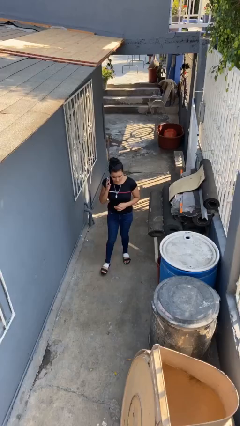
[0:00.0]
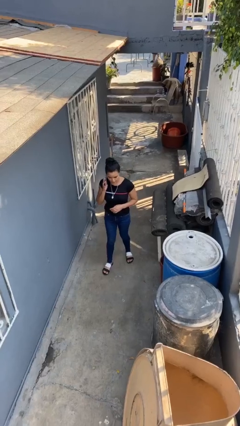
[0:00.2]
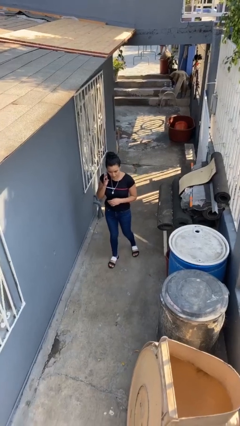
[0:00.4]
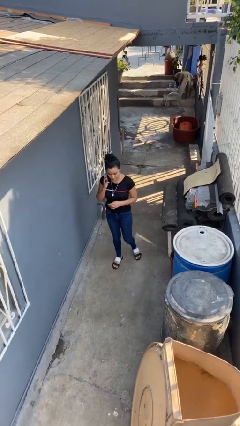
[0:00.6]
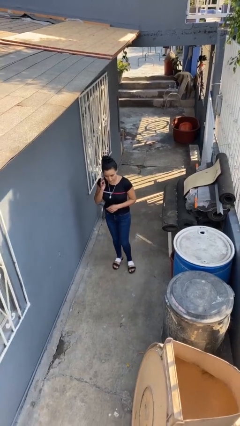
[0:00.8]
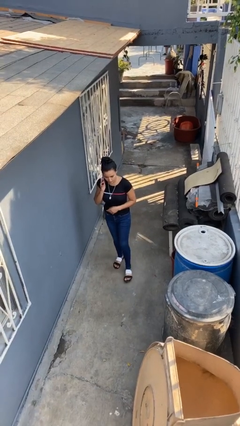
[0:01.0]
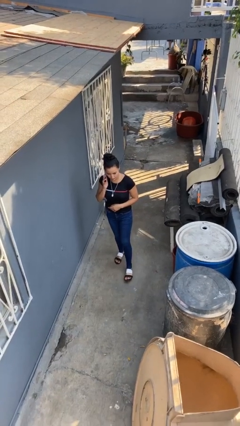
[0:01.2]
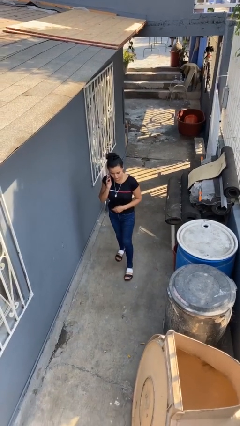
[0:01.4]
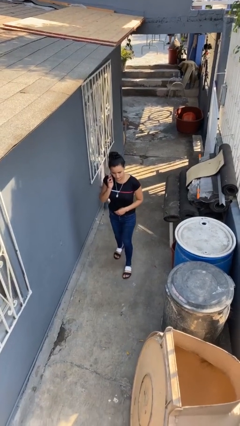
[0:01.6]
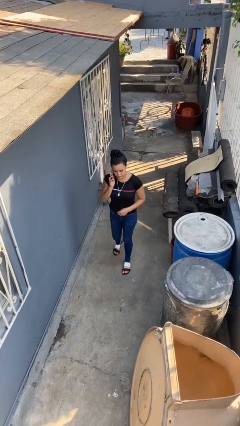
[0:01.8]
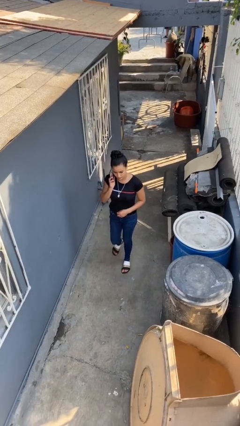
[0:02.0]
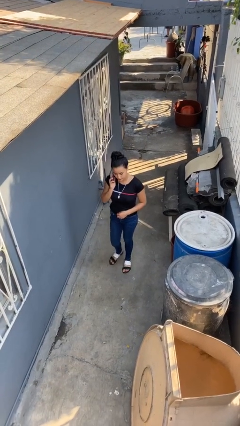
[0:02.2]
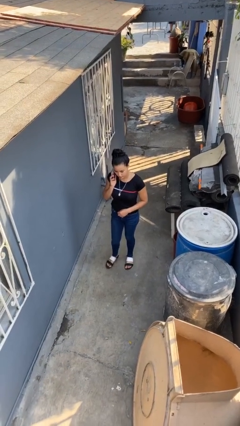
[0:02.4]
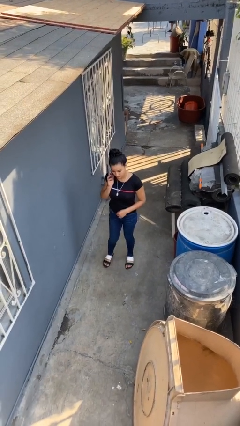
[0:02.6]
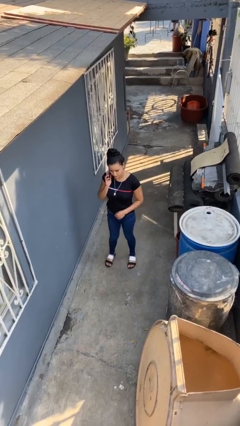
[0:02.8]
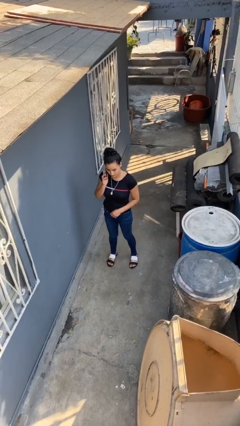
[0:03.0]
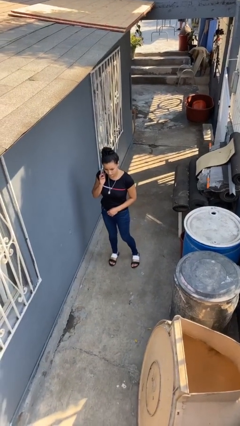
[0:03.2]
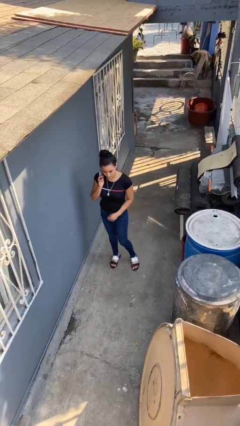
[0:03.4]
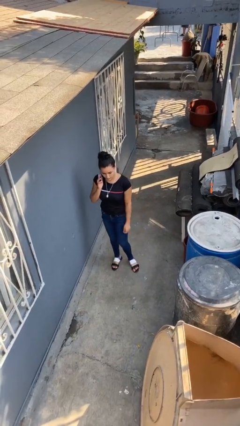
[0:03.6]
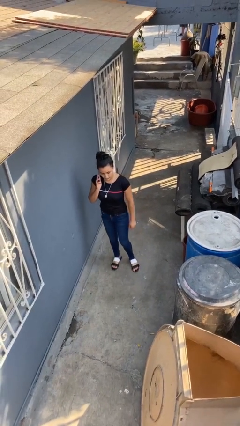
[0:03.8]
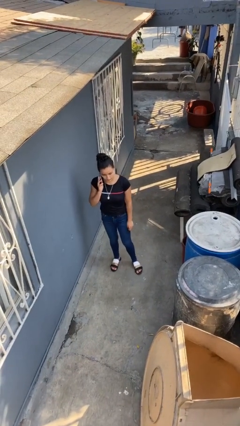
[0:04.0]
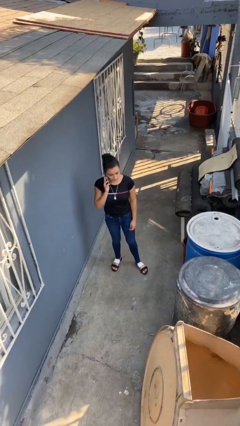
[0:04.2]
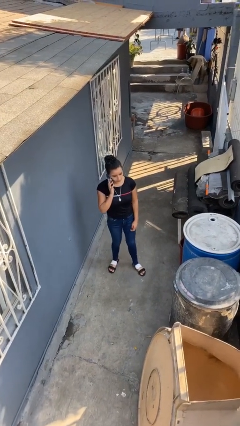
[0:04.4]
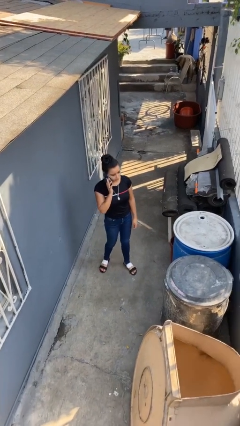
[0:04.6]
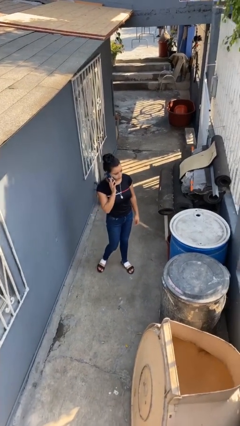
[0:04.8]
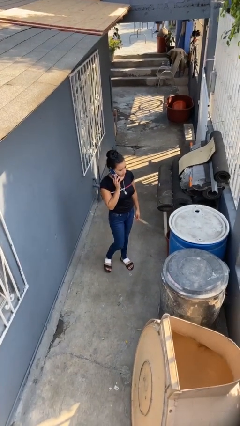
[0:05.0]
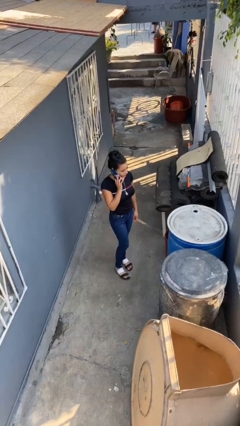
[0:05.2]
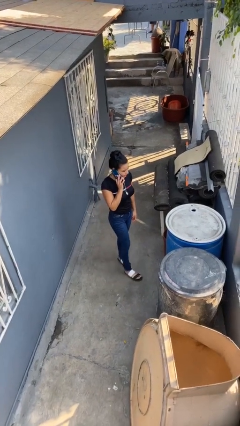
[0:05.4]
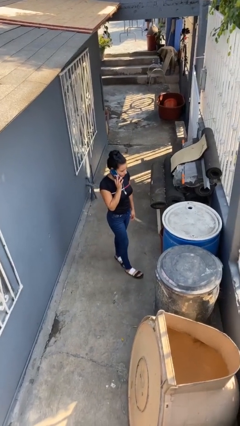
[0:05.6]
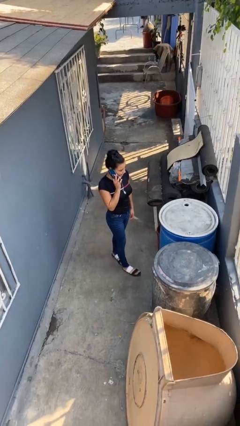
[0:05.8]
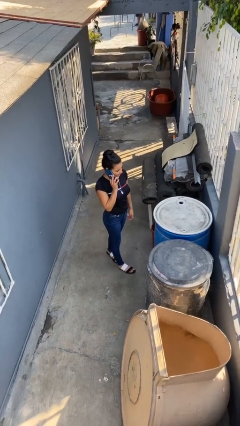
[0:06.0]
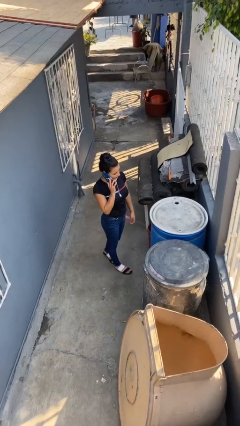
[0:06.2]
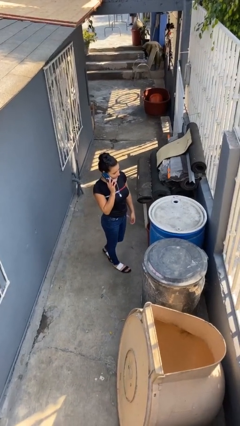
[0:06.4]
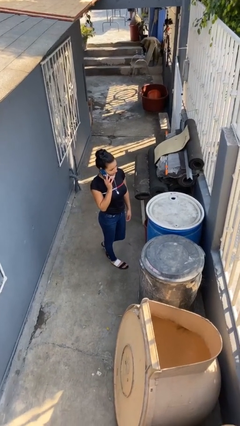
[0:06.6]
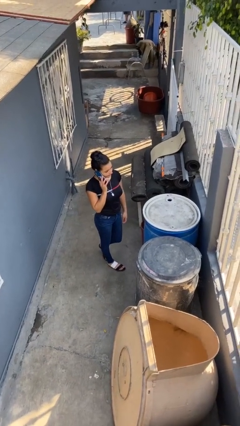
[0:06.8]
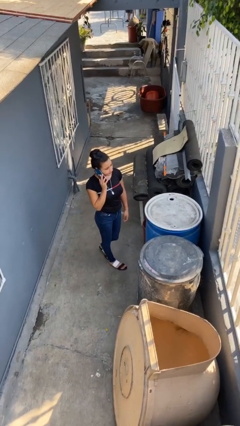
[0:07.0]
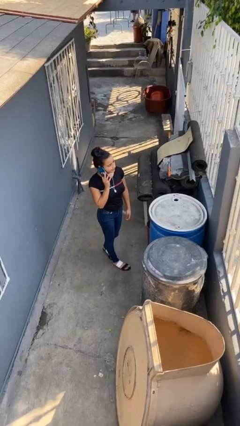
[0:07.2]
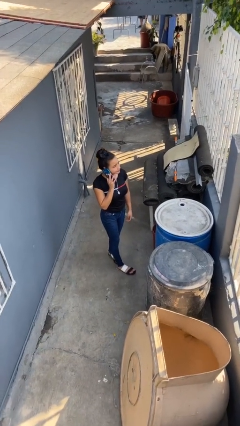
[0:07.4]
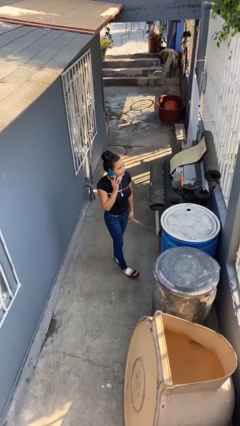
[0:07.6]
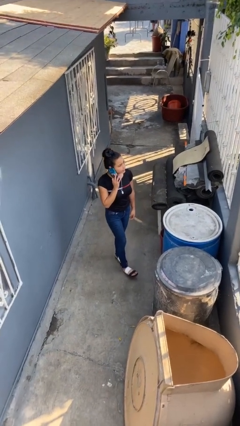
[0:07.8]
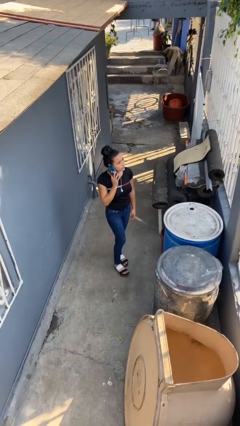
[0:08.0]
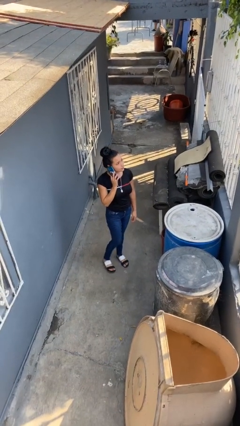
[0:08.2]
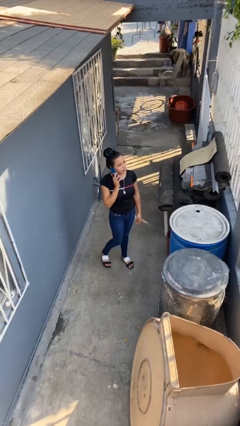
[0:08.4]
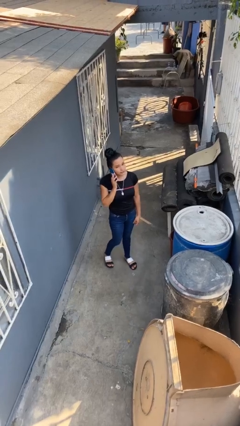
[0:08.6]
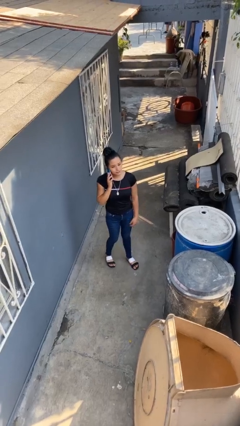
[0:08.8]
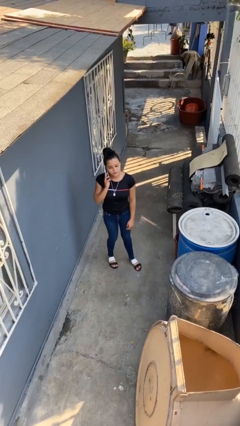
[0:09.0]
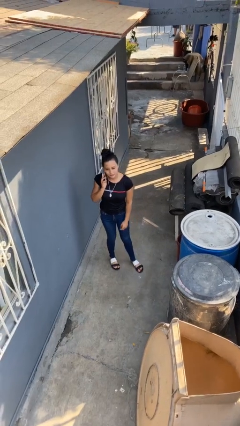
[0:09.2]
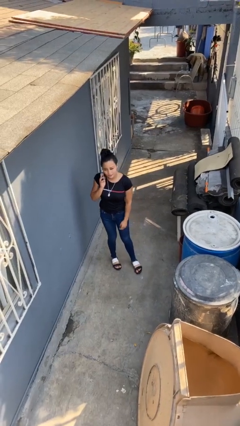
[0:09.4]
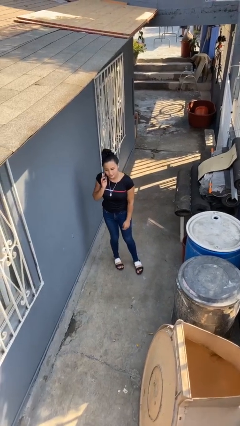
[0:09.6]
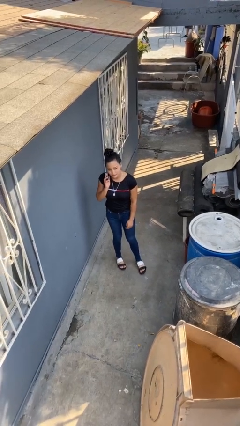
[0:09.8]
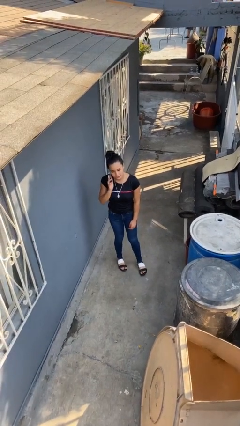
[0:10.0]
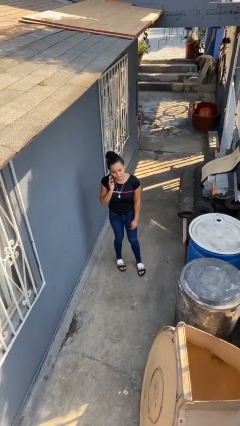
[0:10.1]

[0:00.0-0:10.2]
person talks on phone

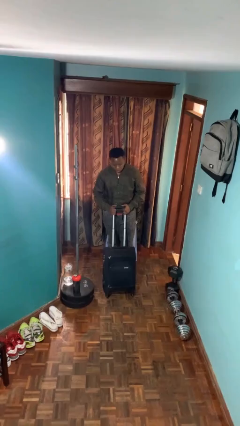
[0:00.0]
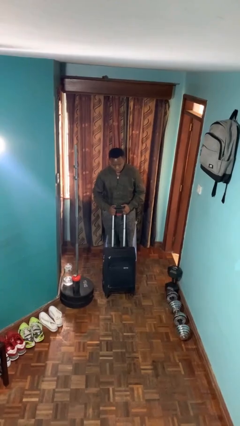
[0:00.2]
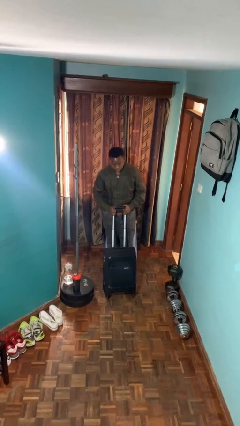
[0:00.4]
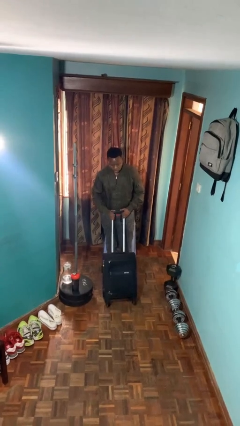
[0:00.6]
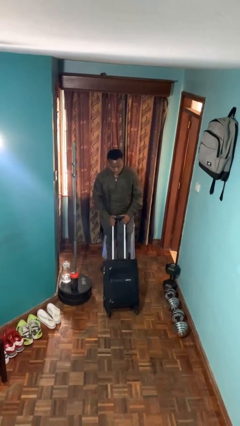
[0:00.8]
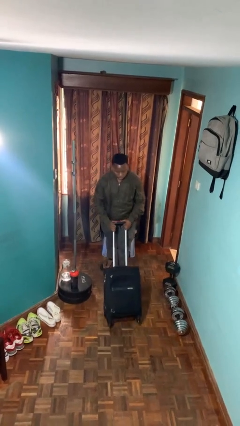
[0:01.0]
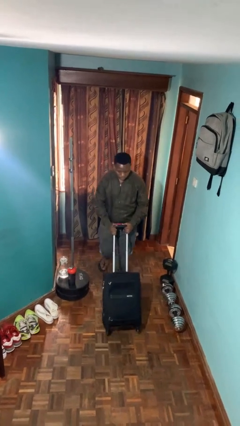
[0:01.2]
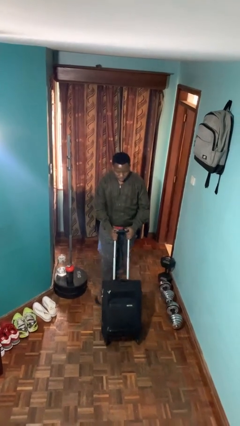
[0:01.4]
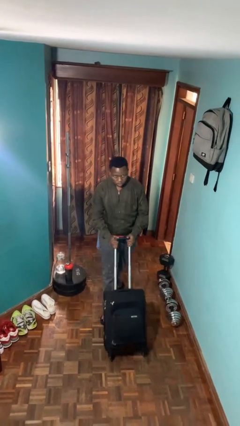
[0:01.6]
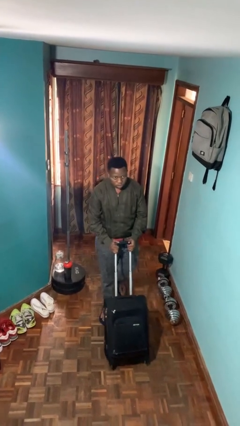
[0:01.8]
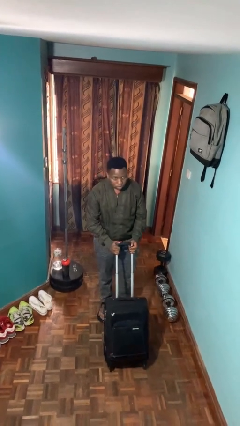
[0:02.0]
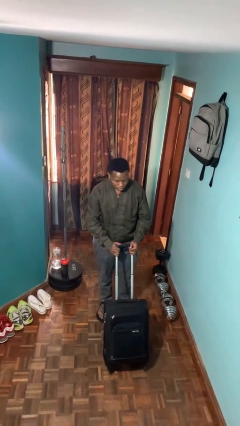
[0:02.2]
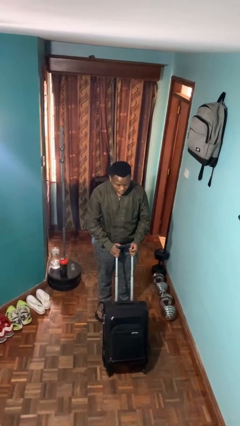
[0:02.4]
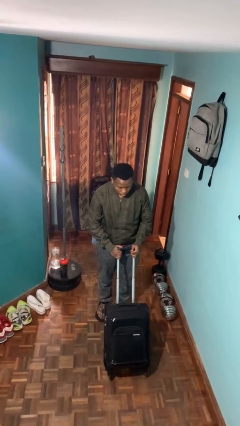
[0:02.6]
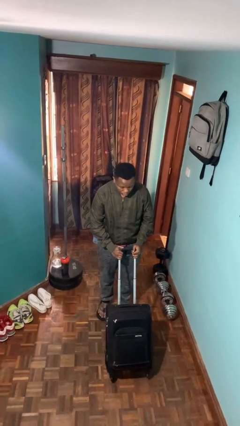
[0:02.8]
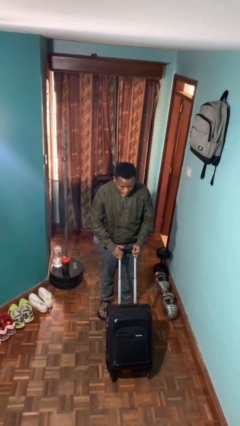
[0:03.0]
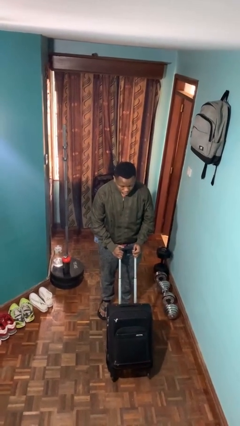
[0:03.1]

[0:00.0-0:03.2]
person pushes wheeled cart

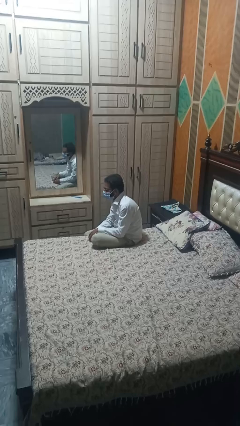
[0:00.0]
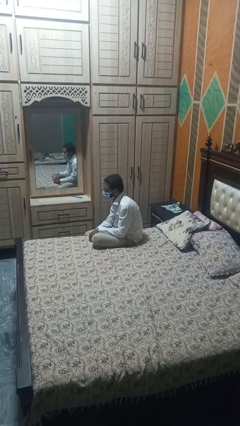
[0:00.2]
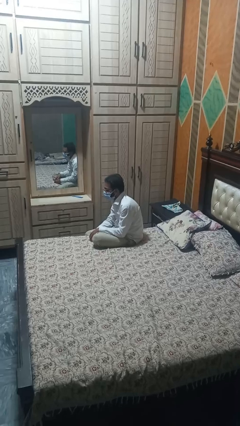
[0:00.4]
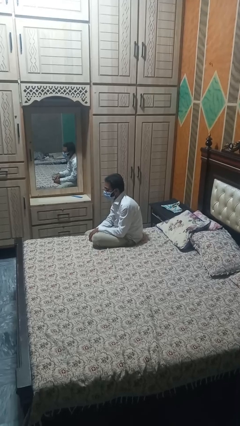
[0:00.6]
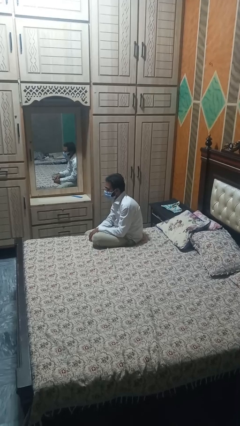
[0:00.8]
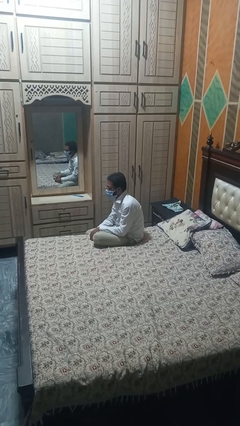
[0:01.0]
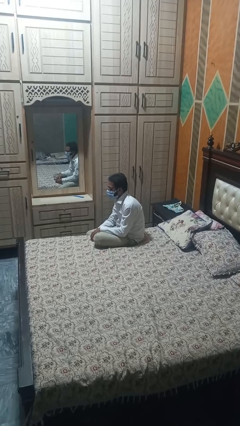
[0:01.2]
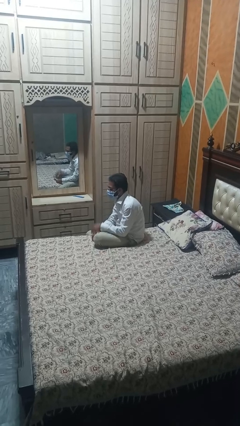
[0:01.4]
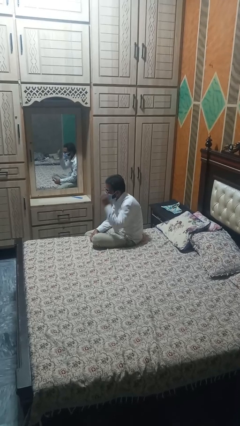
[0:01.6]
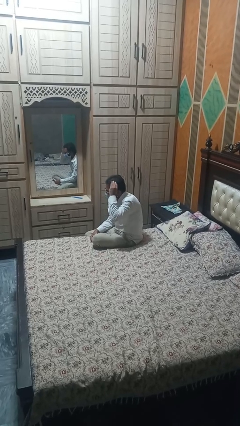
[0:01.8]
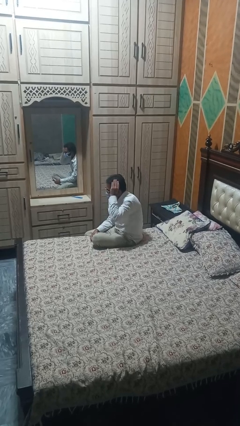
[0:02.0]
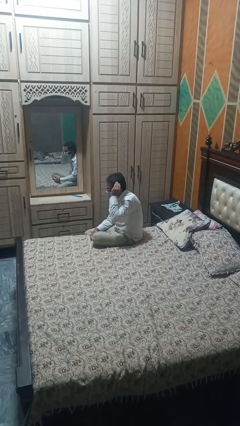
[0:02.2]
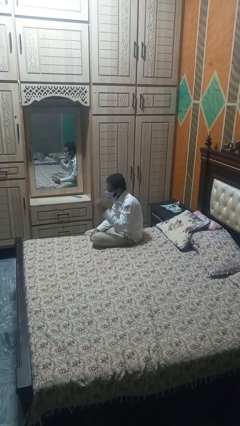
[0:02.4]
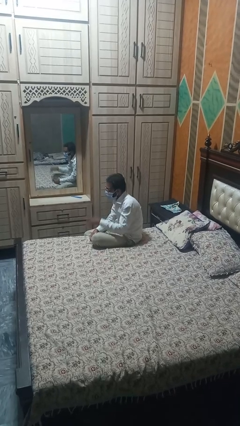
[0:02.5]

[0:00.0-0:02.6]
person strokes hair

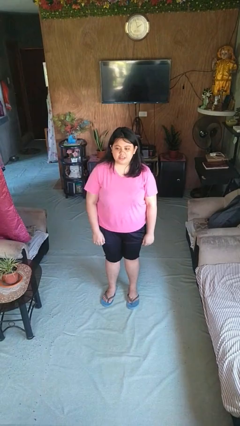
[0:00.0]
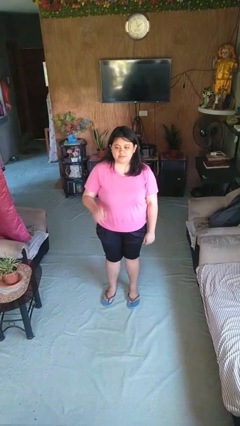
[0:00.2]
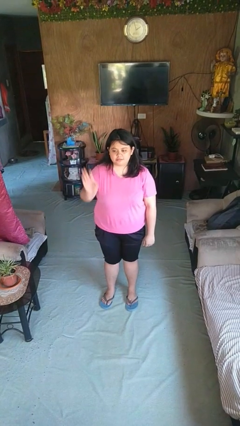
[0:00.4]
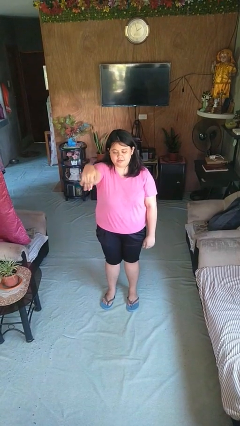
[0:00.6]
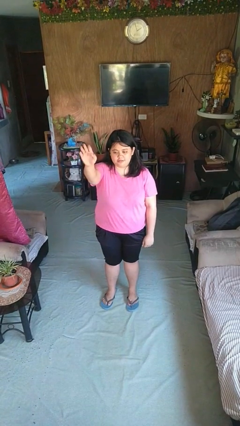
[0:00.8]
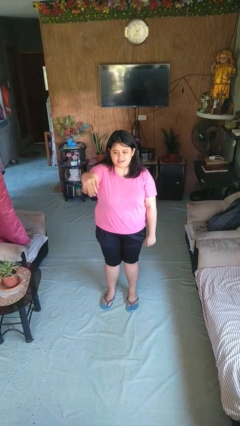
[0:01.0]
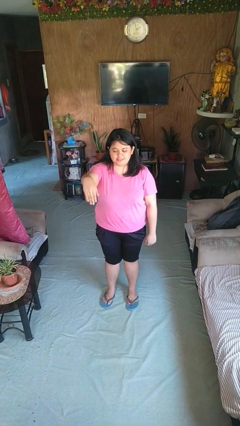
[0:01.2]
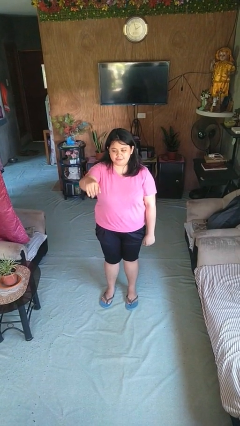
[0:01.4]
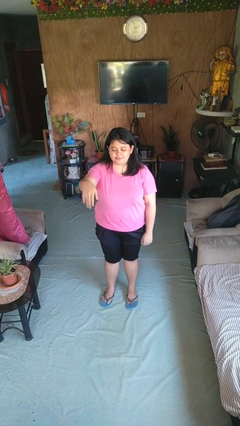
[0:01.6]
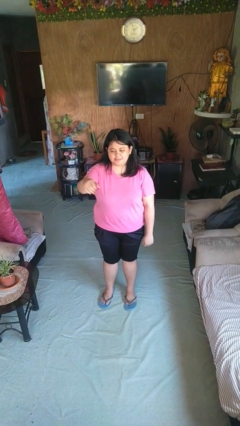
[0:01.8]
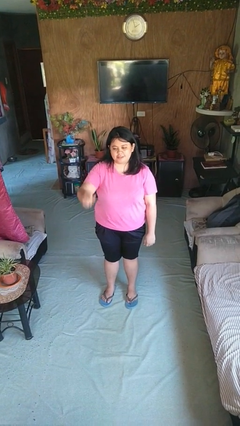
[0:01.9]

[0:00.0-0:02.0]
person gestures come here
